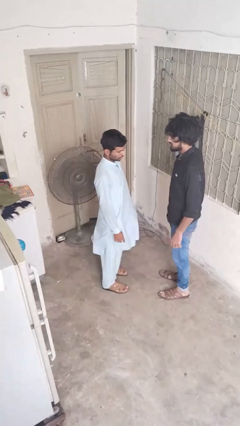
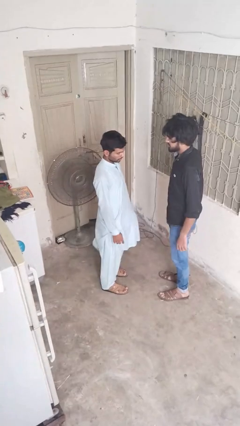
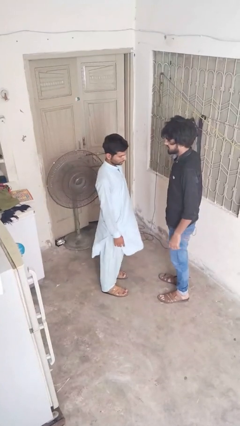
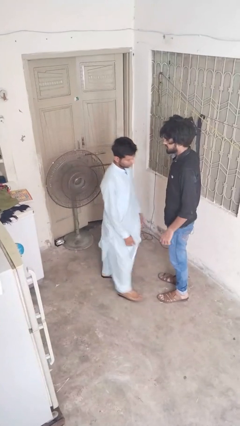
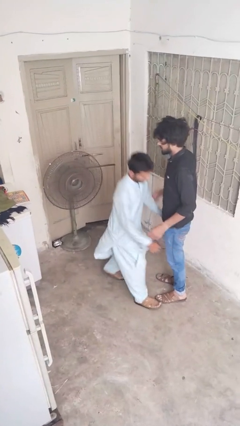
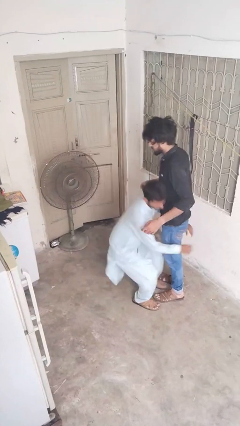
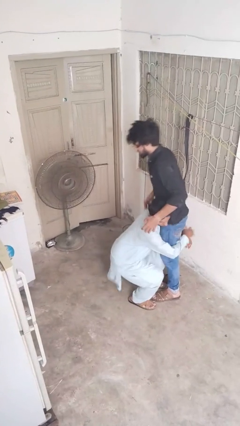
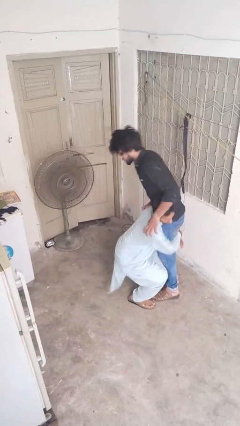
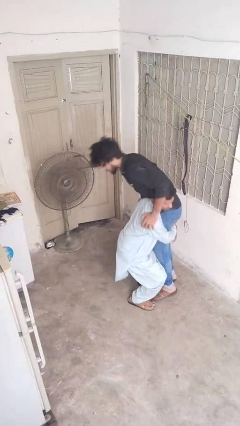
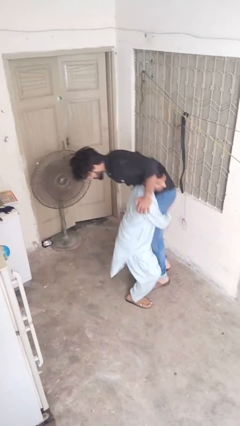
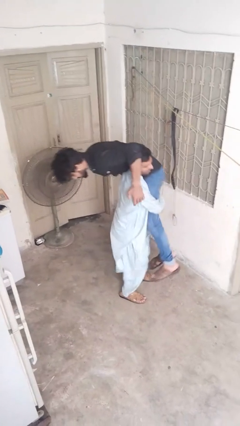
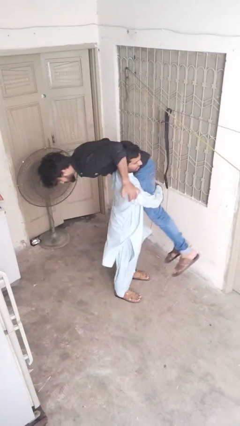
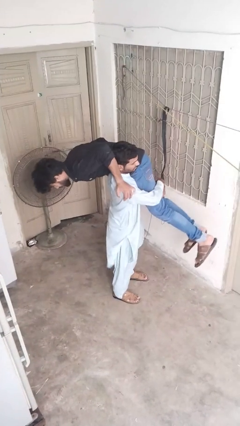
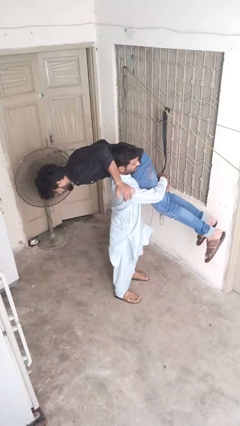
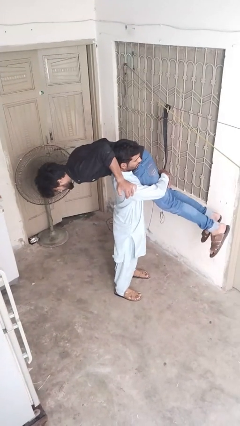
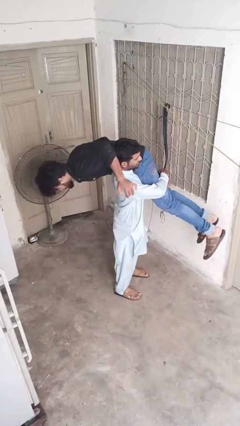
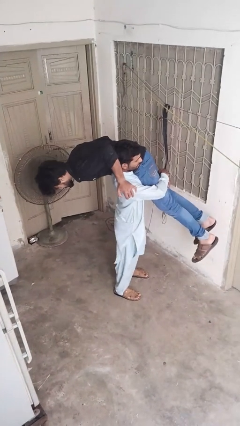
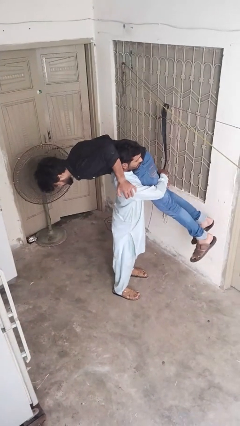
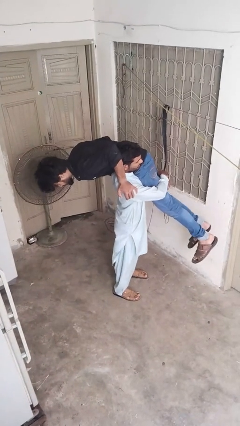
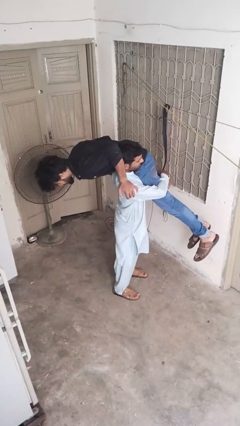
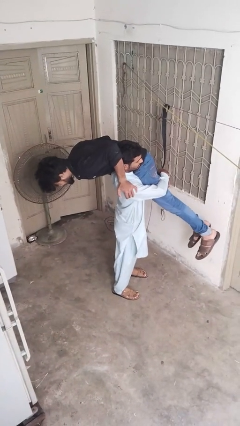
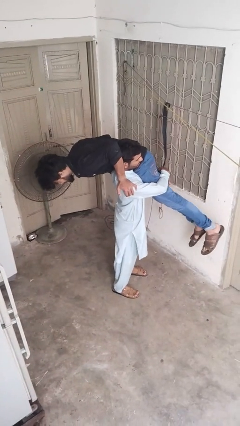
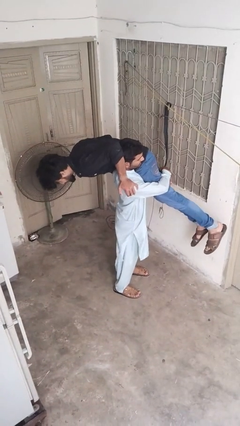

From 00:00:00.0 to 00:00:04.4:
person carries person over shoulder

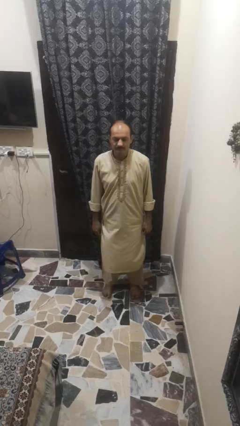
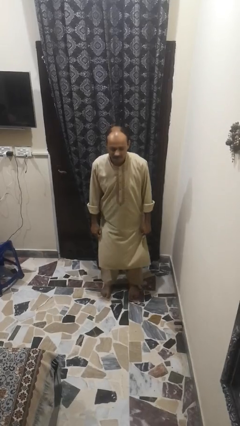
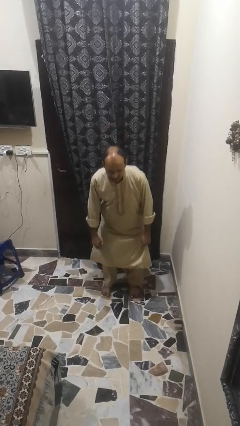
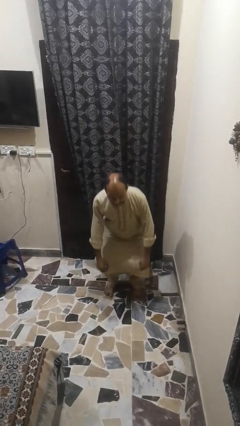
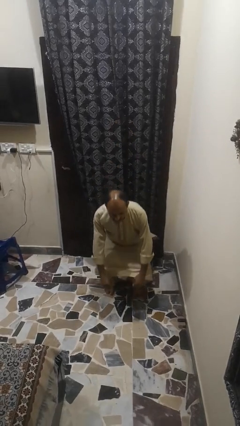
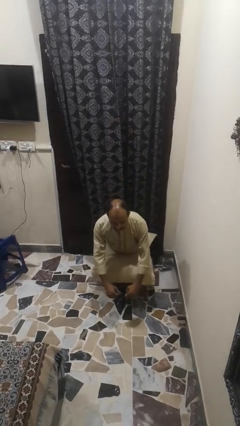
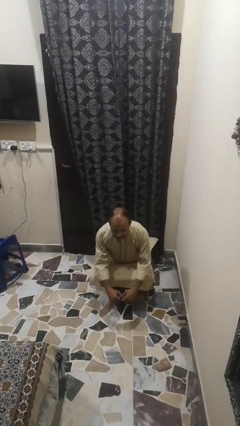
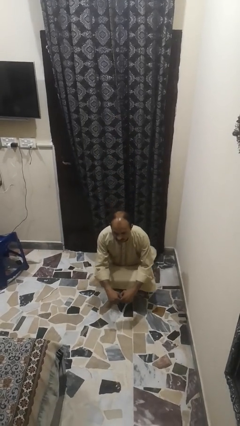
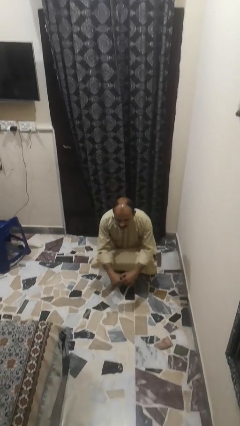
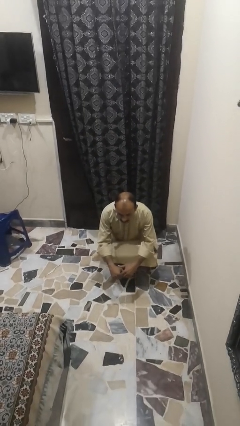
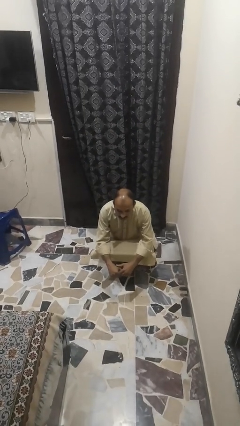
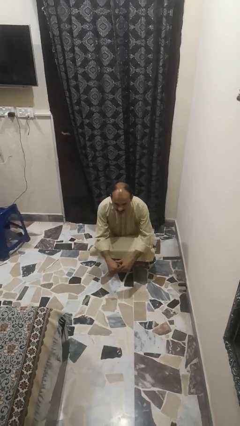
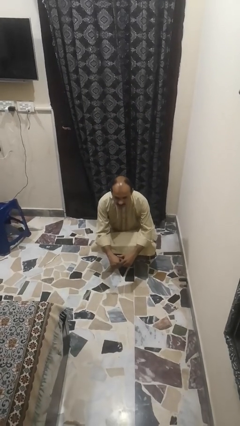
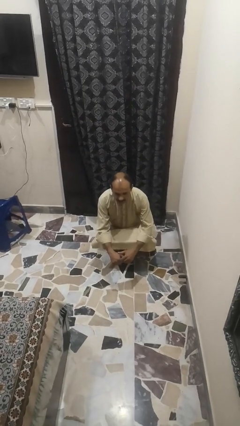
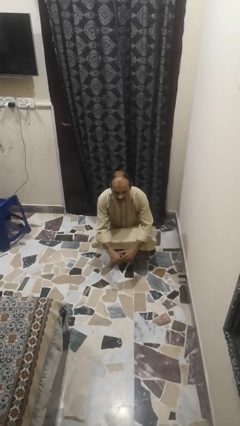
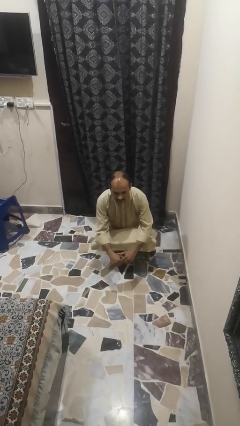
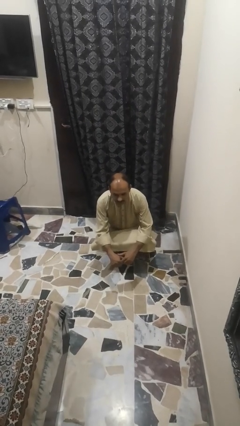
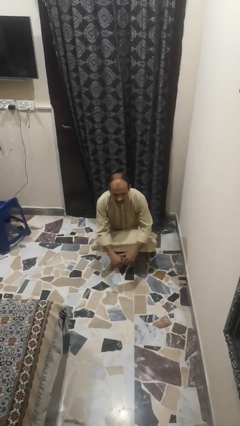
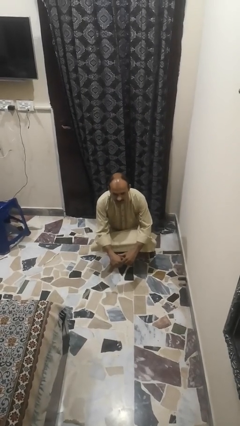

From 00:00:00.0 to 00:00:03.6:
person squats

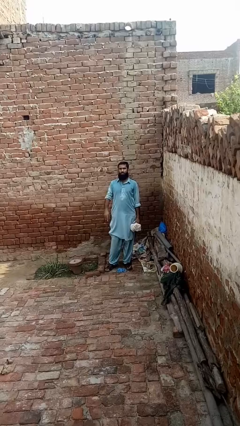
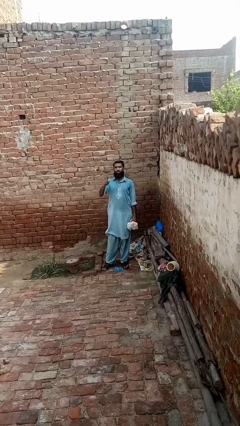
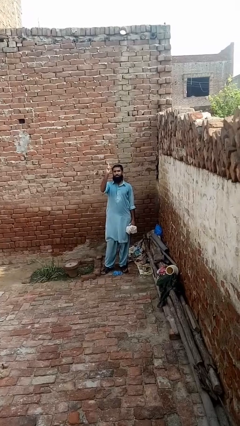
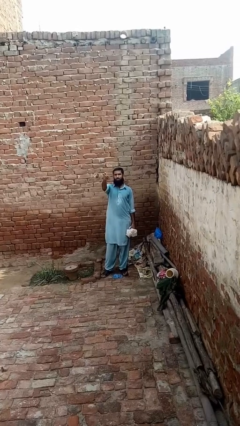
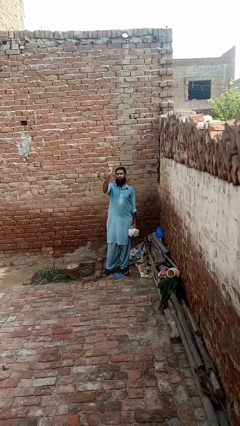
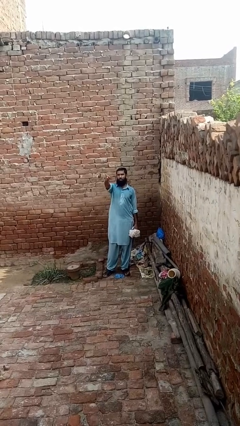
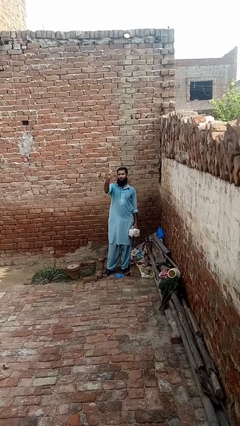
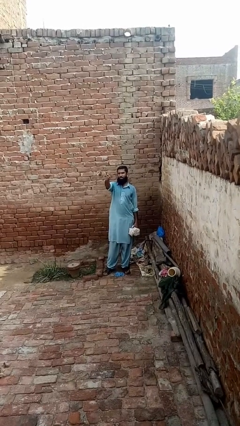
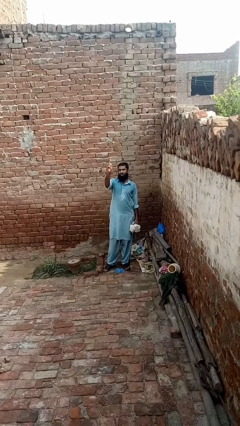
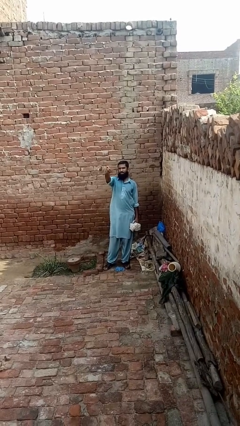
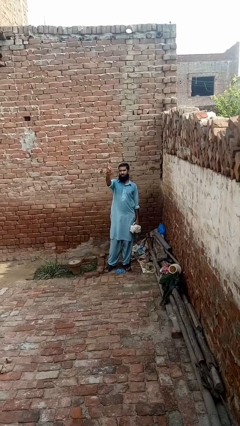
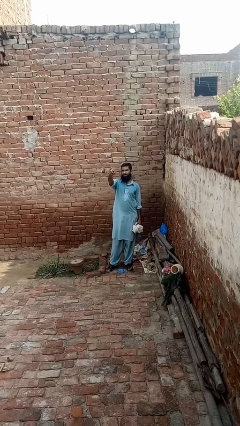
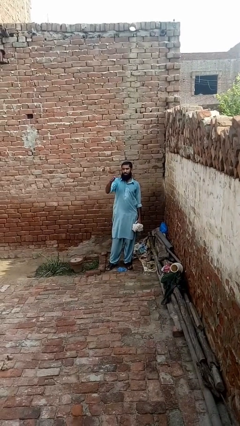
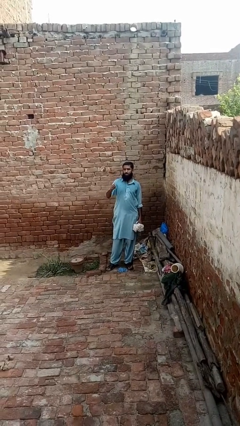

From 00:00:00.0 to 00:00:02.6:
person points at person

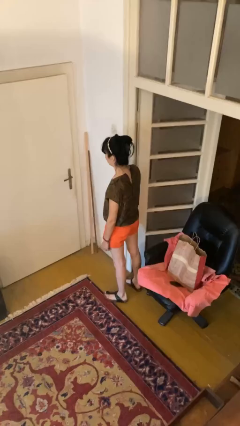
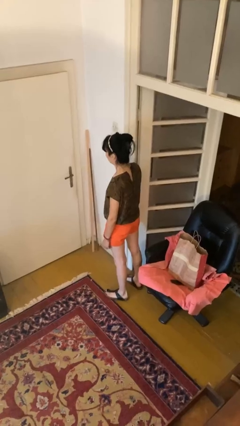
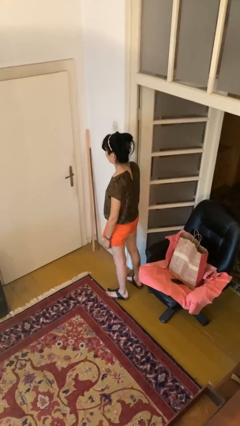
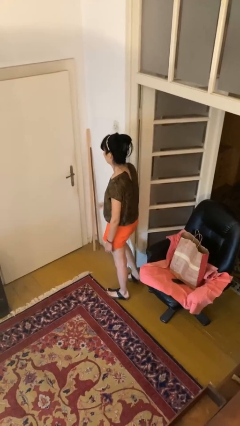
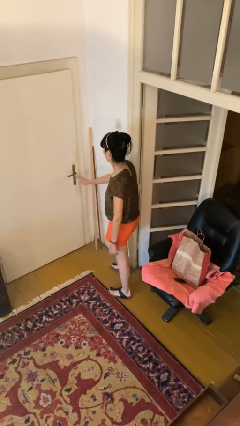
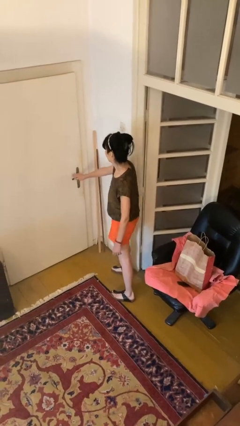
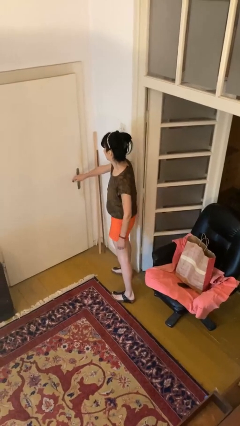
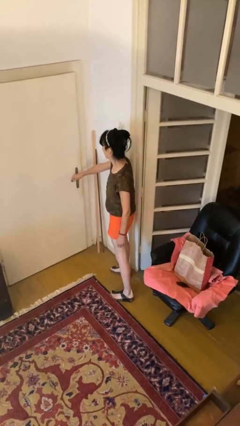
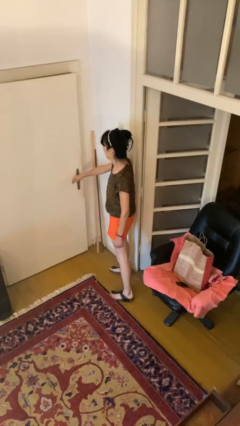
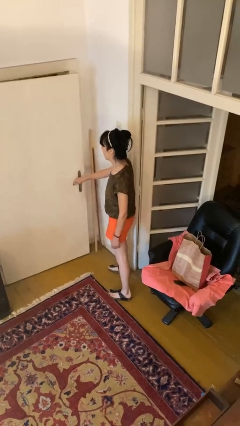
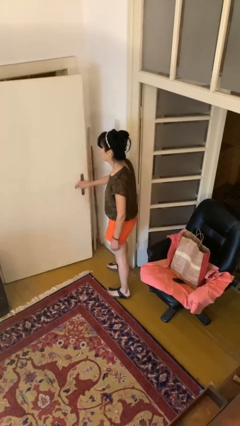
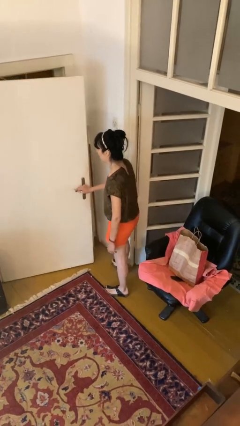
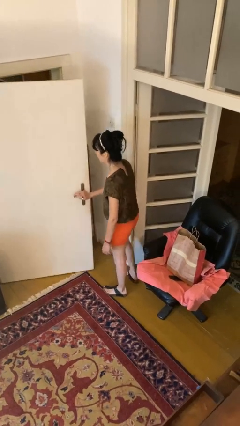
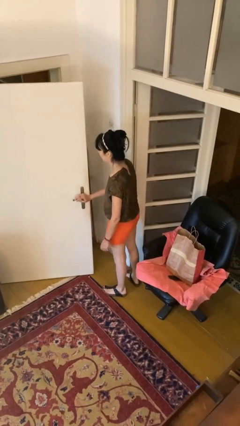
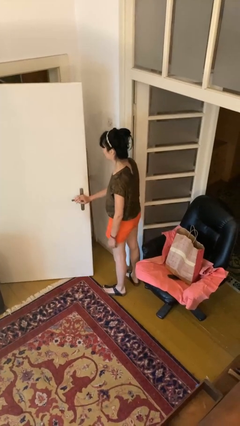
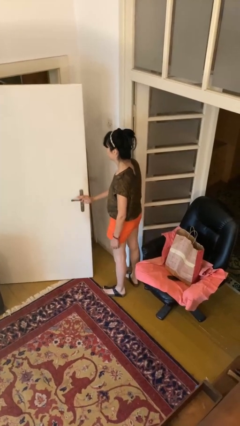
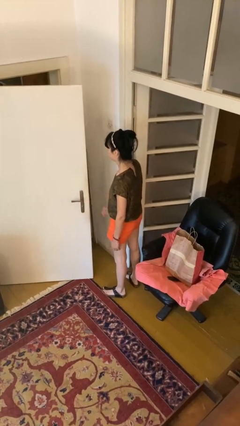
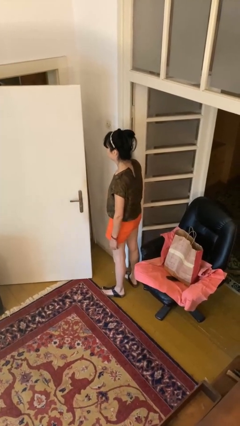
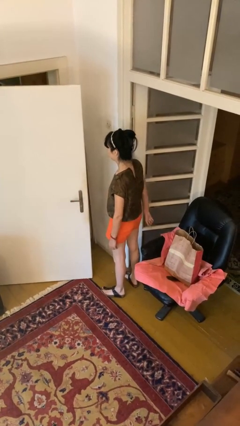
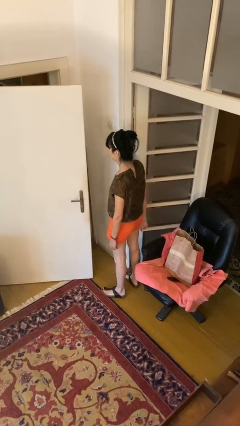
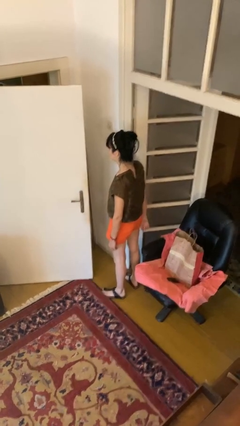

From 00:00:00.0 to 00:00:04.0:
person opens facility door

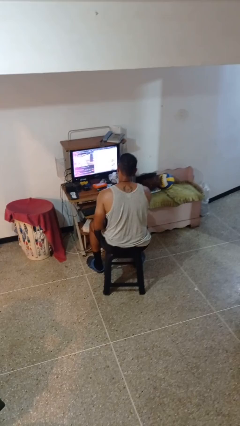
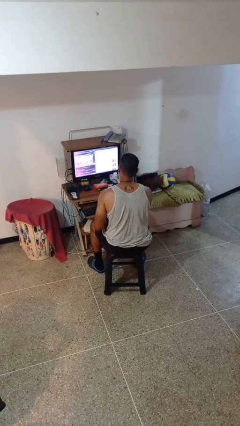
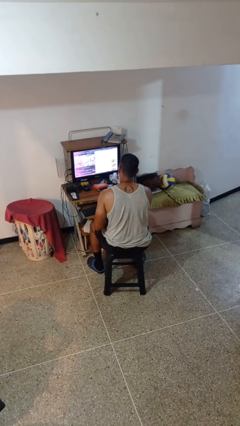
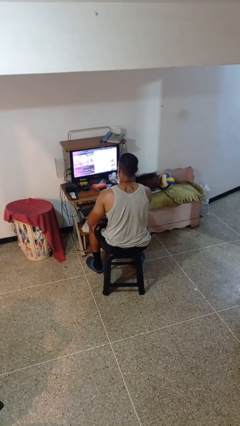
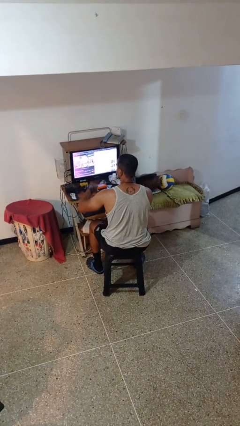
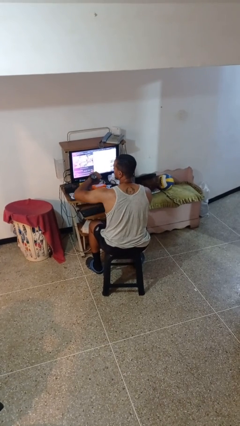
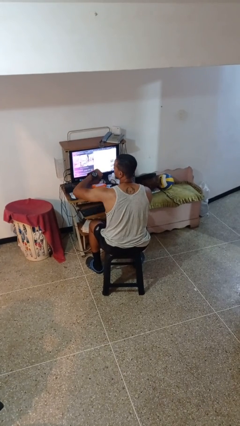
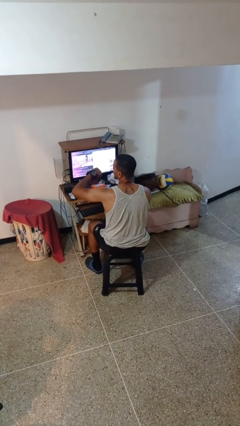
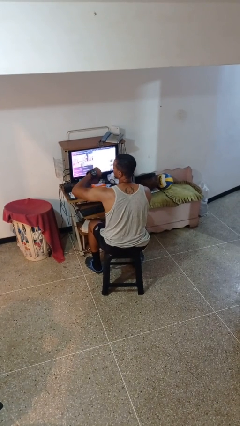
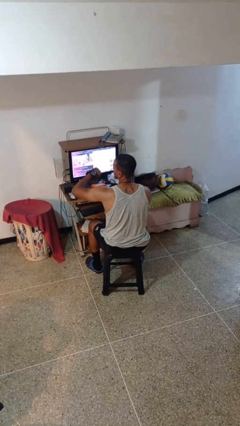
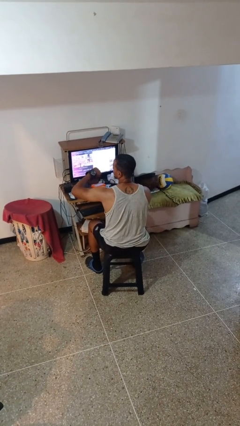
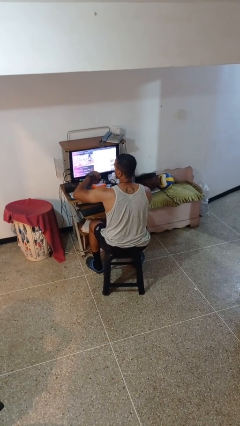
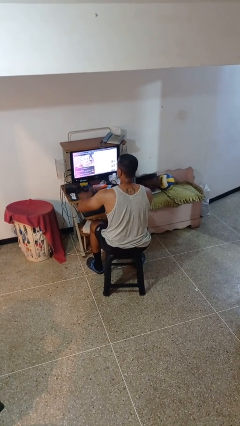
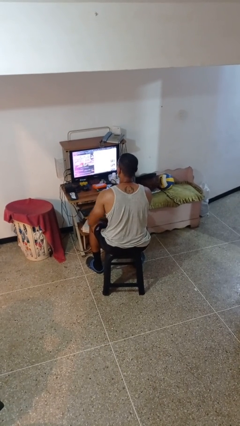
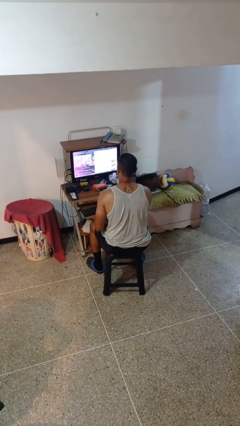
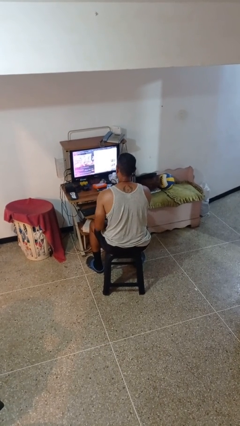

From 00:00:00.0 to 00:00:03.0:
person looks at wristwatch

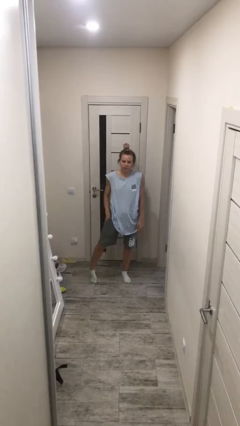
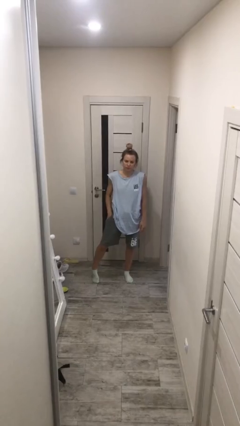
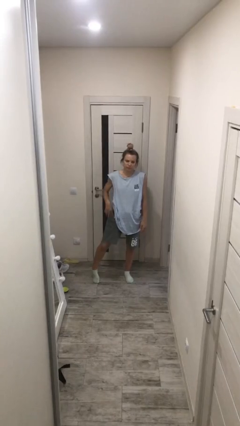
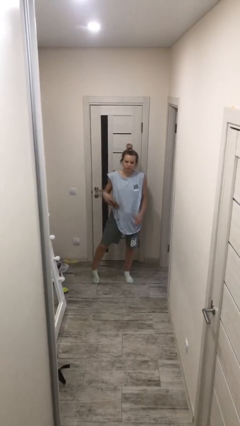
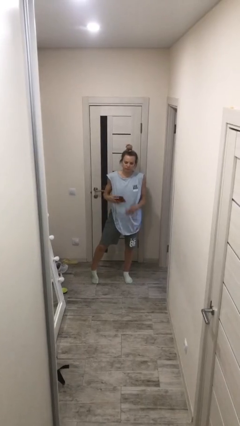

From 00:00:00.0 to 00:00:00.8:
person takes phone from pocket
